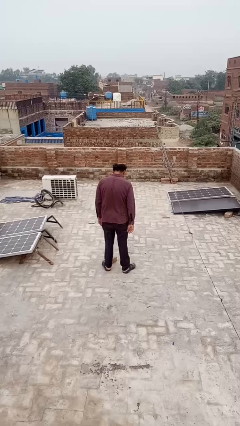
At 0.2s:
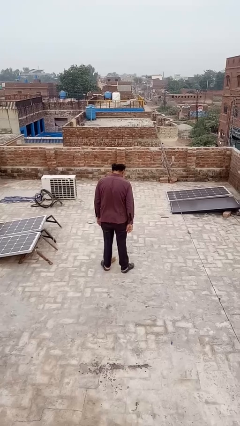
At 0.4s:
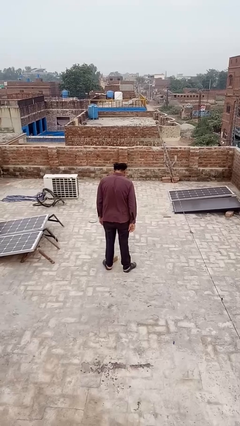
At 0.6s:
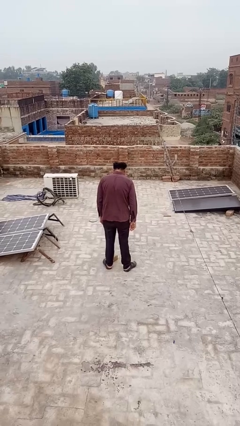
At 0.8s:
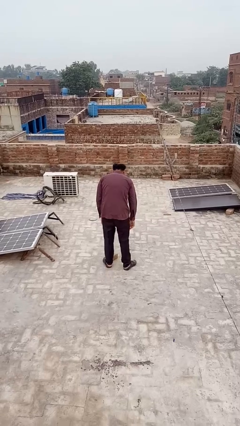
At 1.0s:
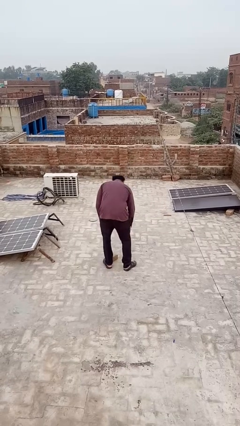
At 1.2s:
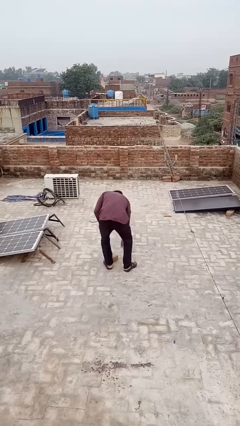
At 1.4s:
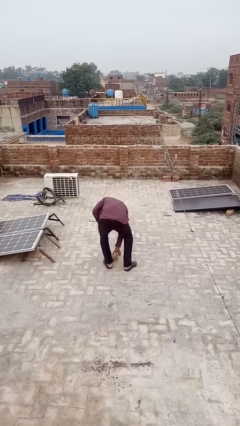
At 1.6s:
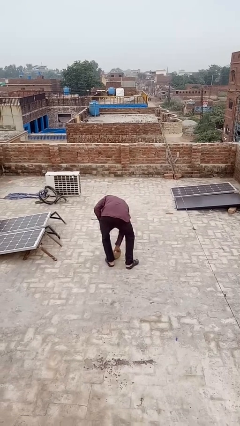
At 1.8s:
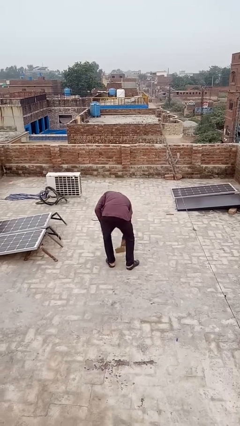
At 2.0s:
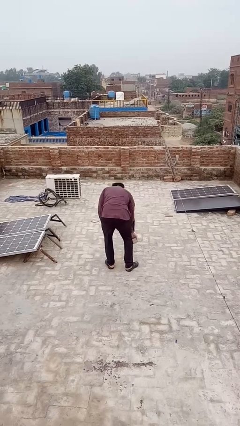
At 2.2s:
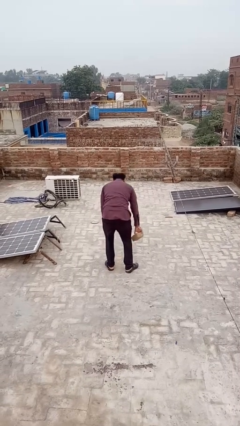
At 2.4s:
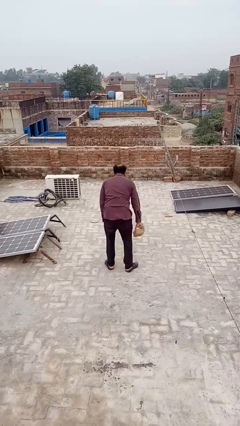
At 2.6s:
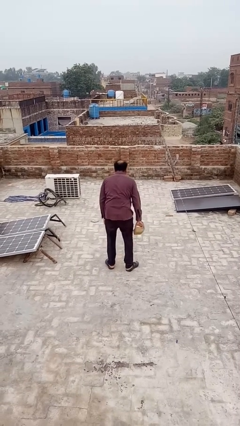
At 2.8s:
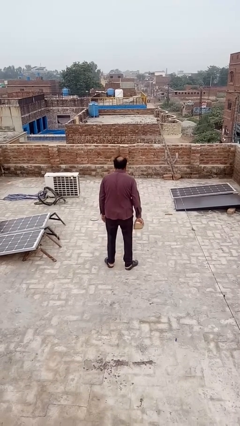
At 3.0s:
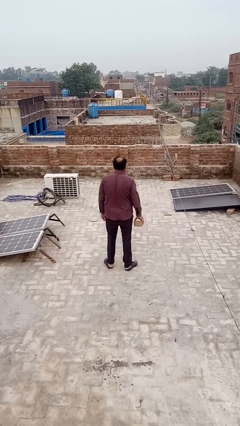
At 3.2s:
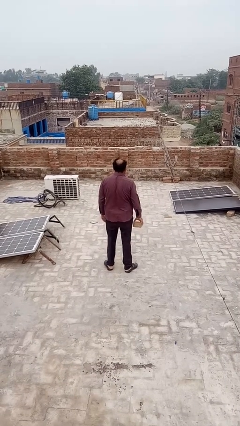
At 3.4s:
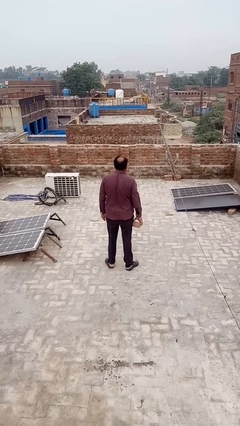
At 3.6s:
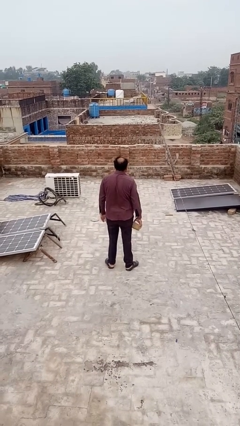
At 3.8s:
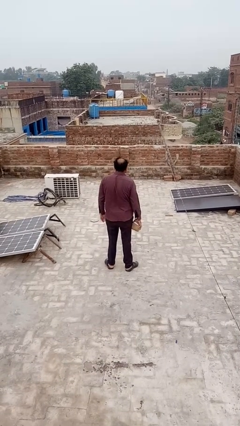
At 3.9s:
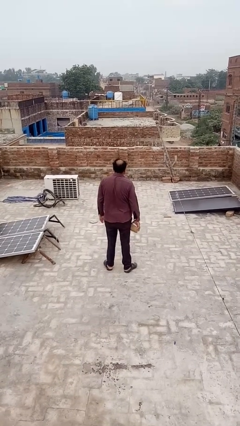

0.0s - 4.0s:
person picks up object from floor

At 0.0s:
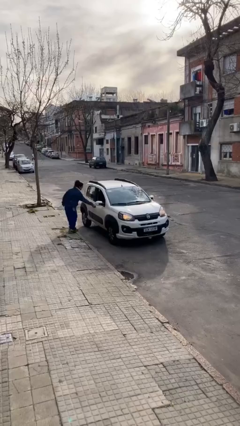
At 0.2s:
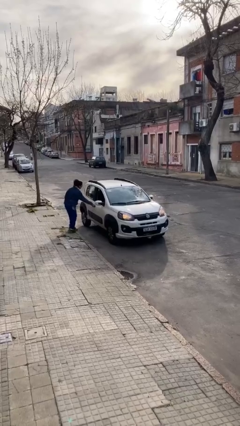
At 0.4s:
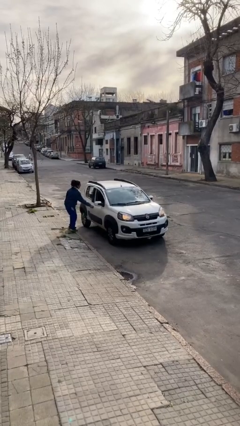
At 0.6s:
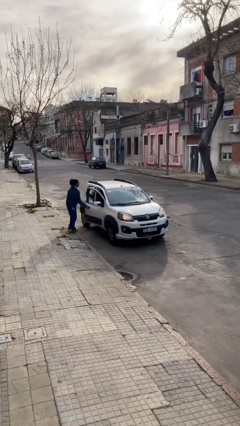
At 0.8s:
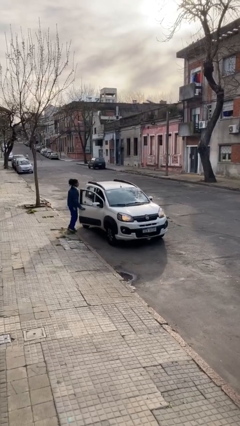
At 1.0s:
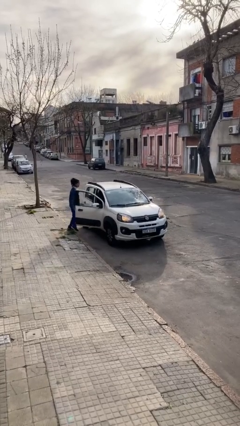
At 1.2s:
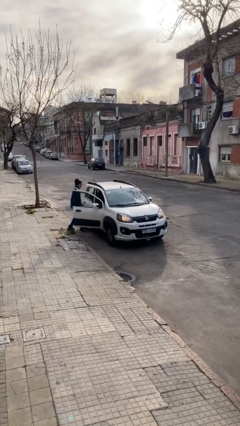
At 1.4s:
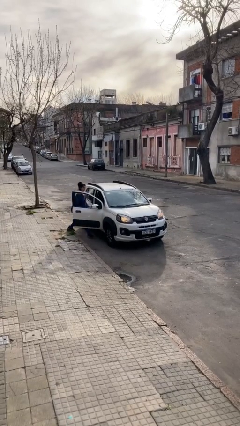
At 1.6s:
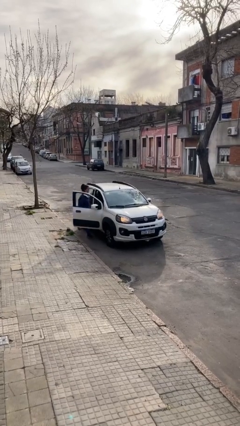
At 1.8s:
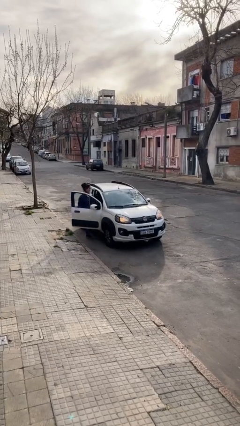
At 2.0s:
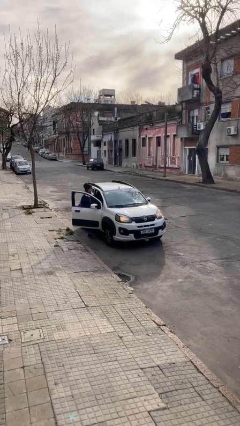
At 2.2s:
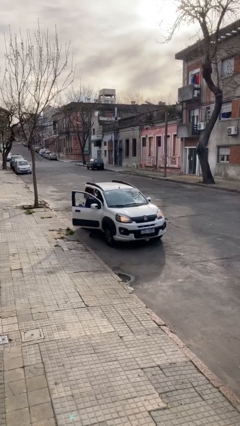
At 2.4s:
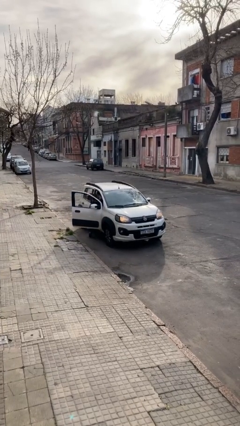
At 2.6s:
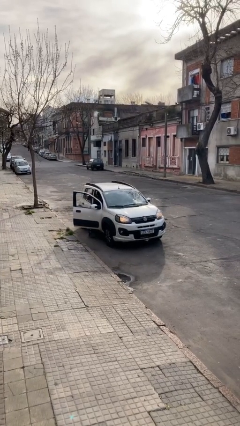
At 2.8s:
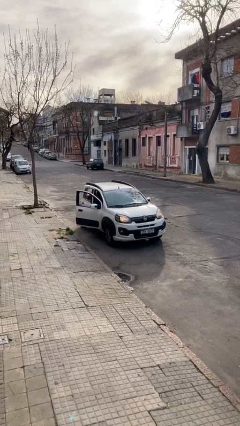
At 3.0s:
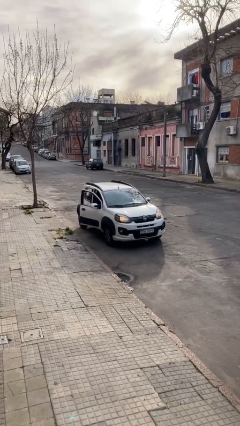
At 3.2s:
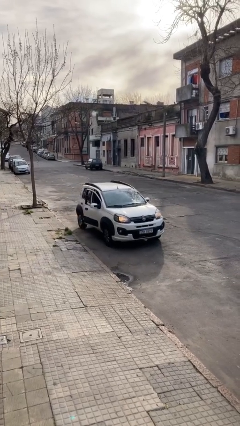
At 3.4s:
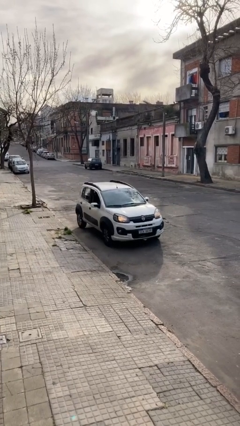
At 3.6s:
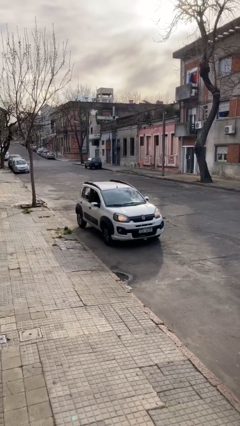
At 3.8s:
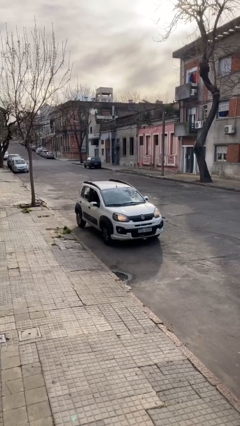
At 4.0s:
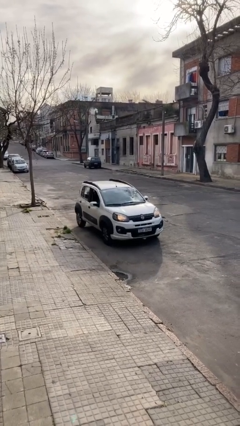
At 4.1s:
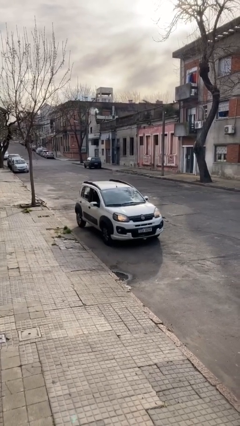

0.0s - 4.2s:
car picks up person

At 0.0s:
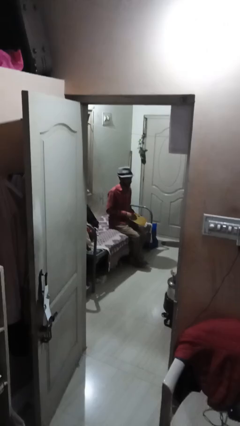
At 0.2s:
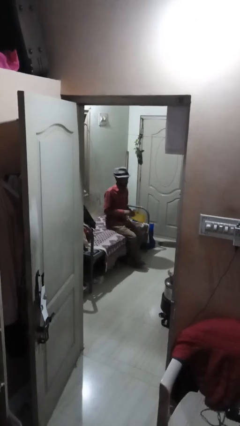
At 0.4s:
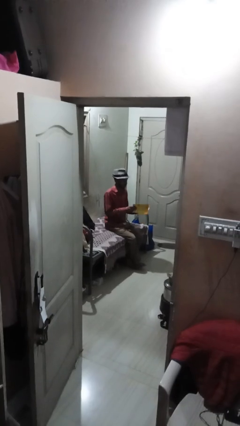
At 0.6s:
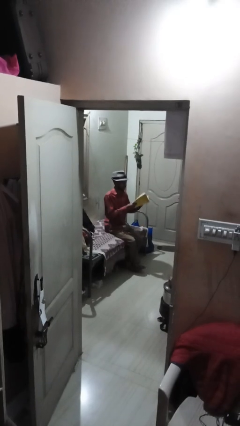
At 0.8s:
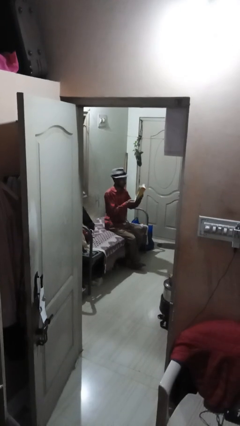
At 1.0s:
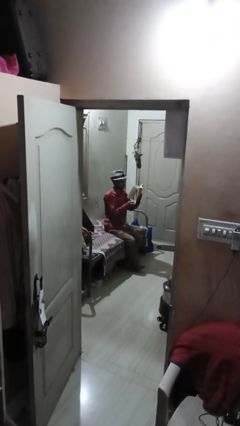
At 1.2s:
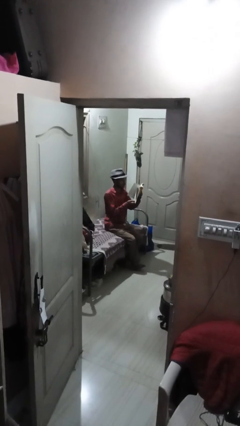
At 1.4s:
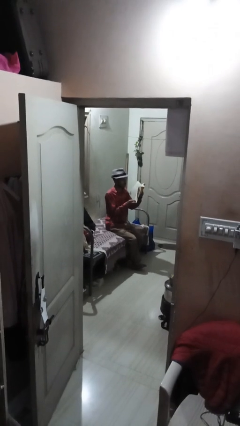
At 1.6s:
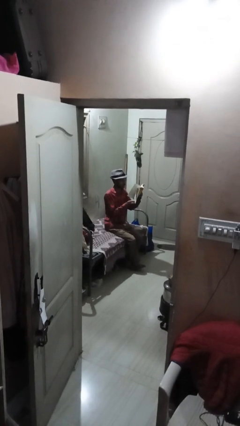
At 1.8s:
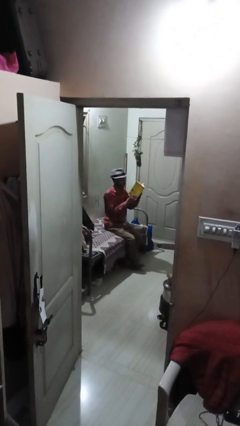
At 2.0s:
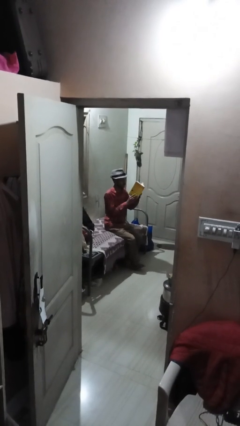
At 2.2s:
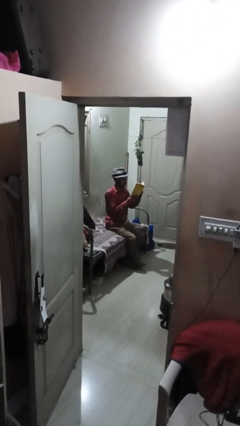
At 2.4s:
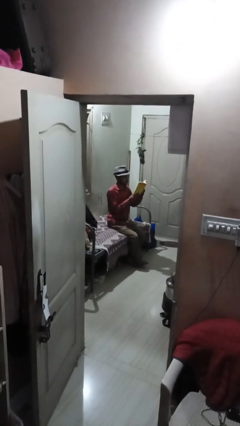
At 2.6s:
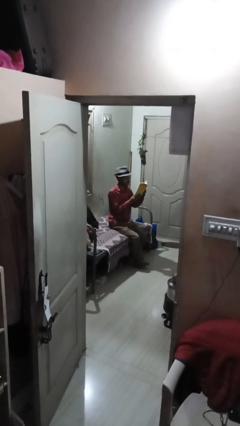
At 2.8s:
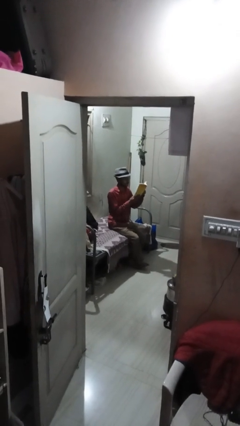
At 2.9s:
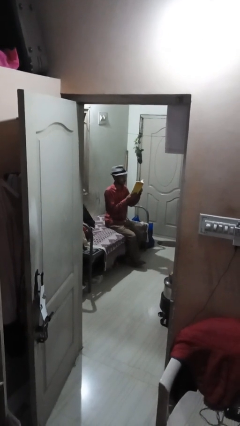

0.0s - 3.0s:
person reads book

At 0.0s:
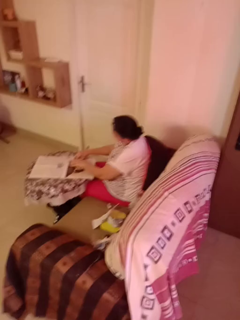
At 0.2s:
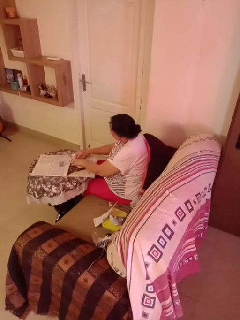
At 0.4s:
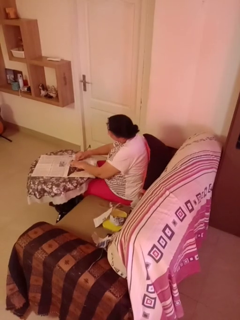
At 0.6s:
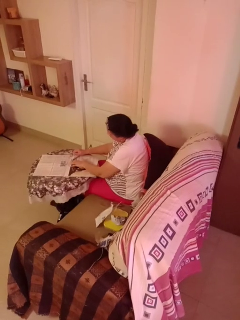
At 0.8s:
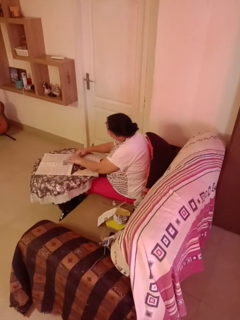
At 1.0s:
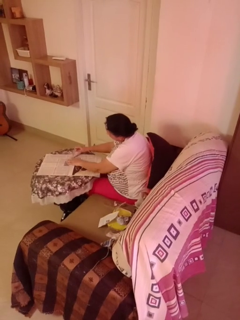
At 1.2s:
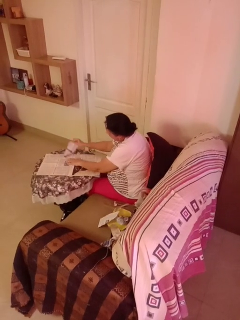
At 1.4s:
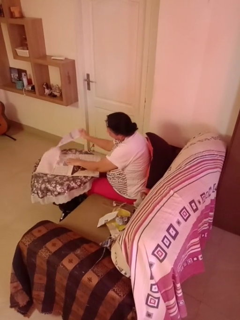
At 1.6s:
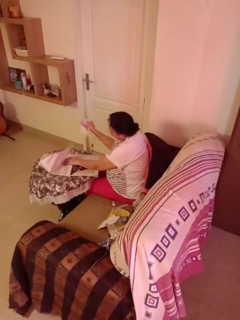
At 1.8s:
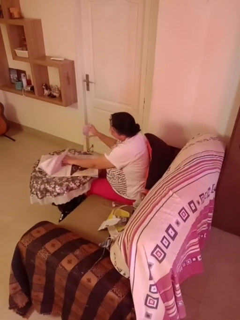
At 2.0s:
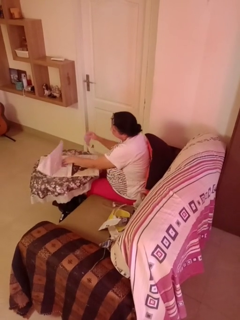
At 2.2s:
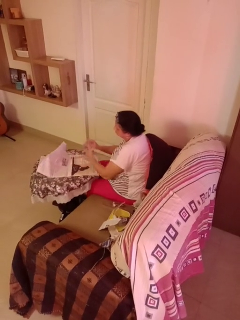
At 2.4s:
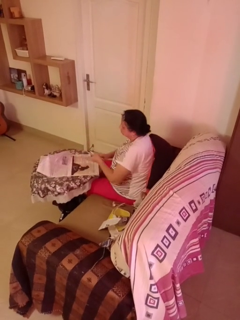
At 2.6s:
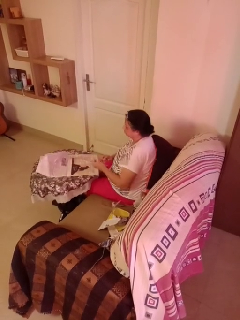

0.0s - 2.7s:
person tears paper

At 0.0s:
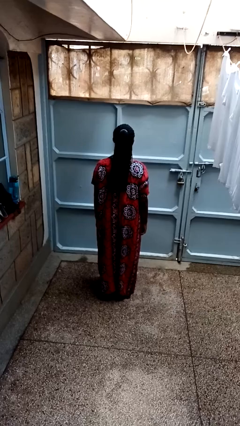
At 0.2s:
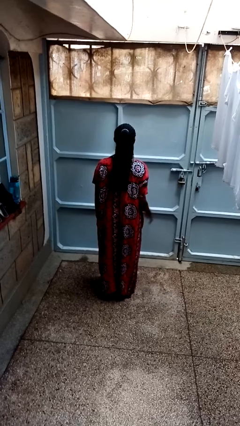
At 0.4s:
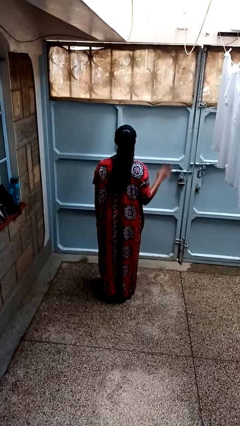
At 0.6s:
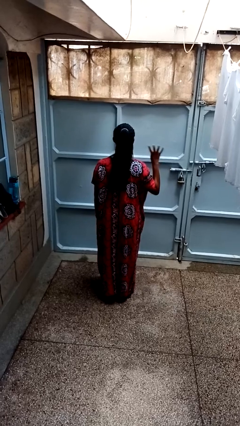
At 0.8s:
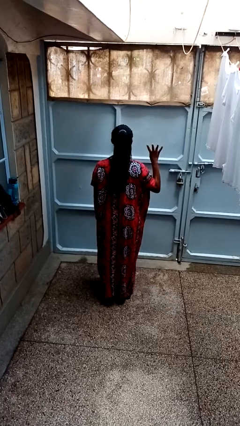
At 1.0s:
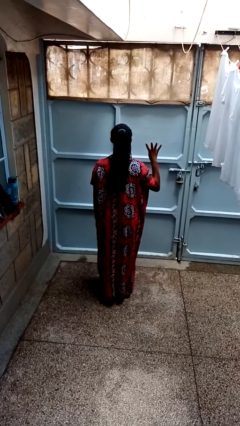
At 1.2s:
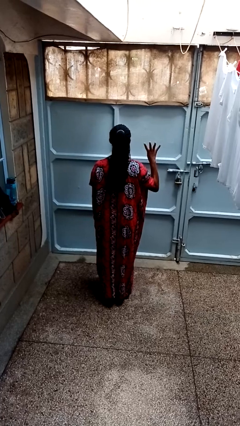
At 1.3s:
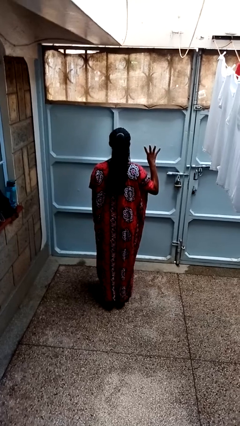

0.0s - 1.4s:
person gestures number four

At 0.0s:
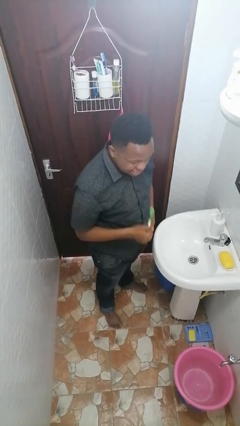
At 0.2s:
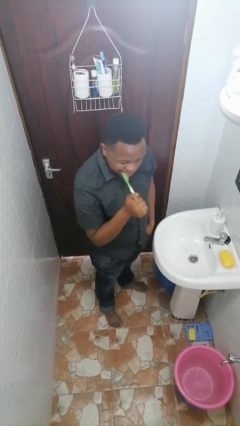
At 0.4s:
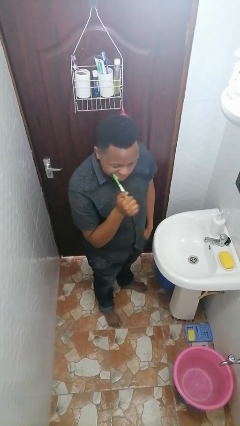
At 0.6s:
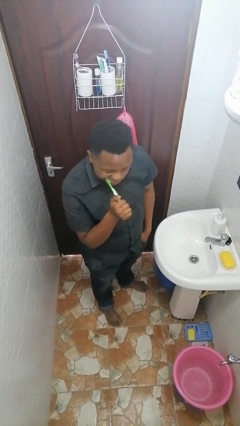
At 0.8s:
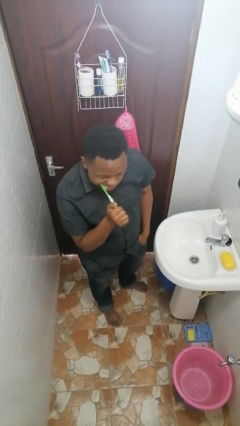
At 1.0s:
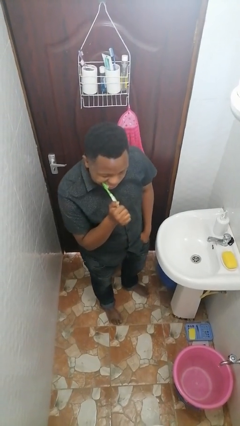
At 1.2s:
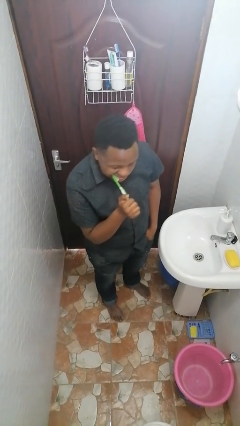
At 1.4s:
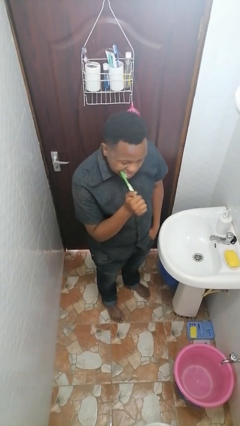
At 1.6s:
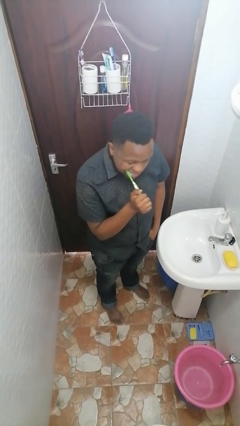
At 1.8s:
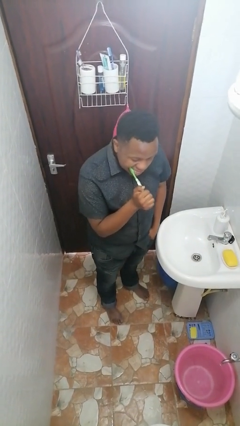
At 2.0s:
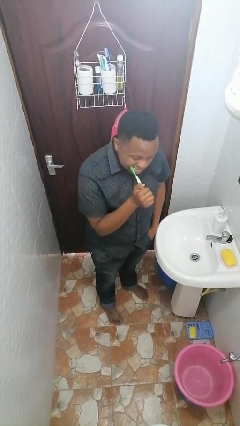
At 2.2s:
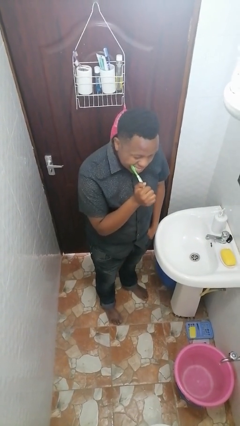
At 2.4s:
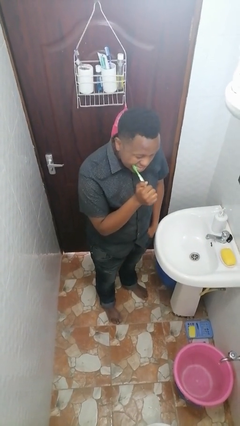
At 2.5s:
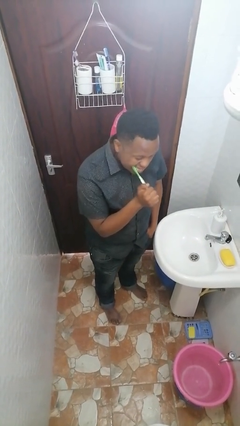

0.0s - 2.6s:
person brushes teeth
